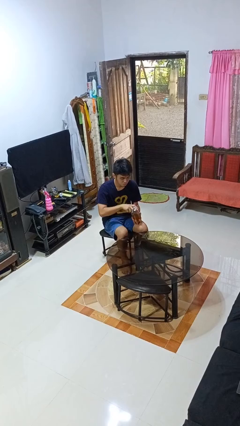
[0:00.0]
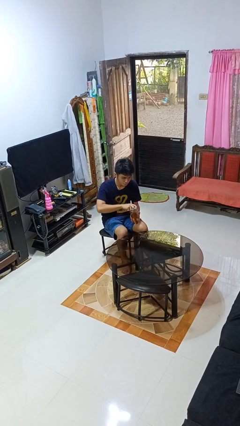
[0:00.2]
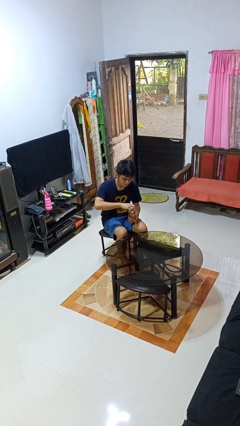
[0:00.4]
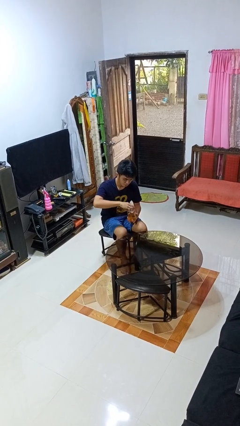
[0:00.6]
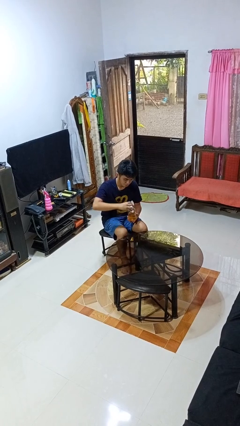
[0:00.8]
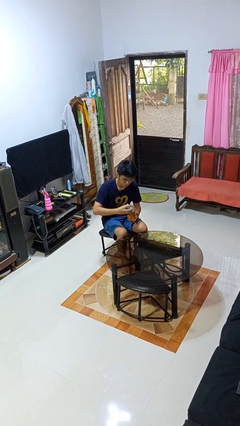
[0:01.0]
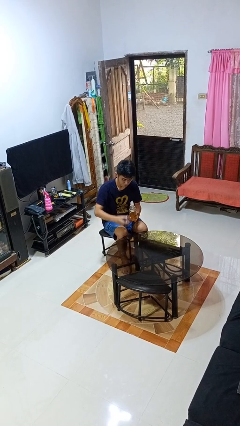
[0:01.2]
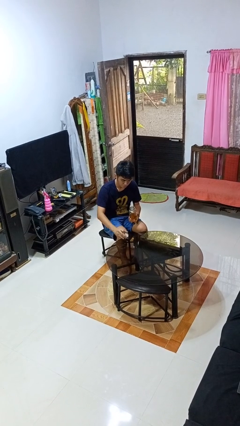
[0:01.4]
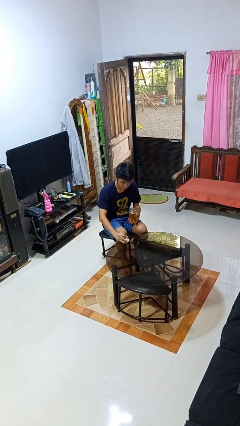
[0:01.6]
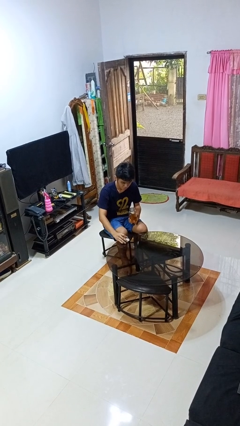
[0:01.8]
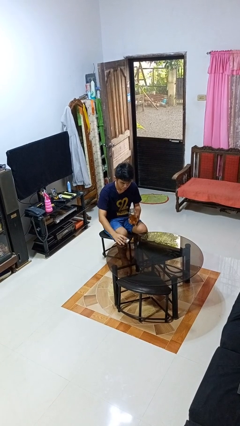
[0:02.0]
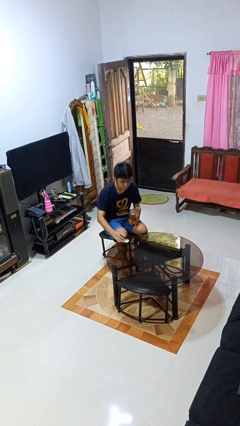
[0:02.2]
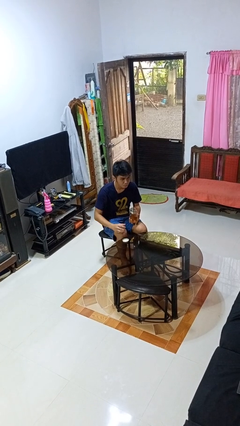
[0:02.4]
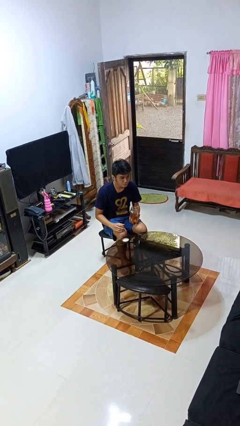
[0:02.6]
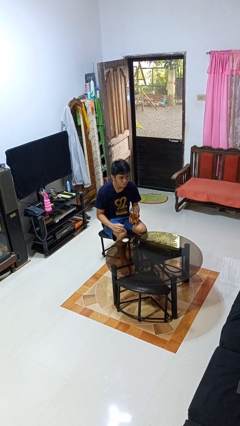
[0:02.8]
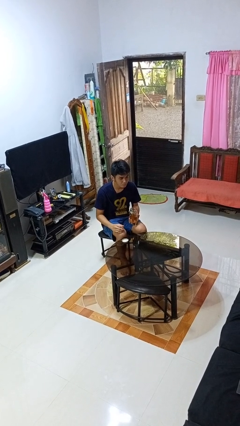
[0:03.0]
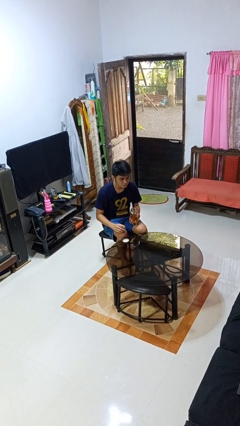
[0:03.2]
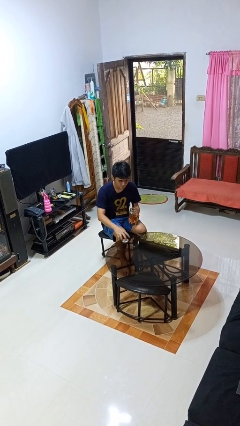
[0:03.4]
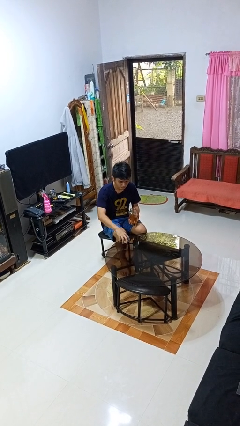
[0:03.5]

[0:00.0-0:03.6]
person opens jar

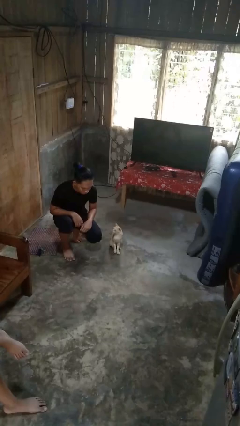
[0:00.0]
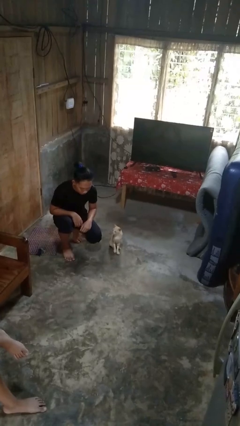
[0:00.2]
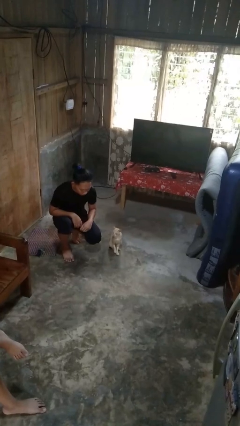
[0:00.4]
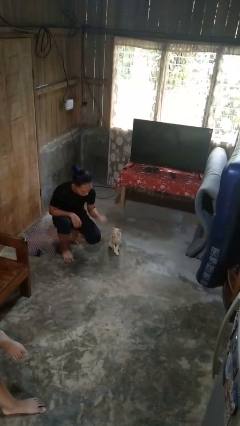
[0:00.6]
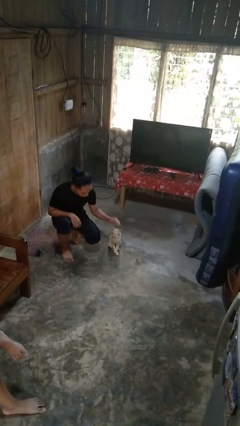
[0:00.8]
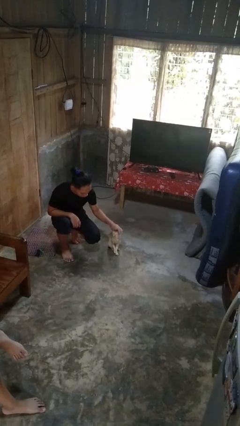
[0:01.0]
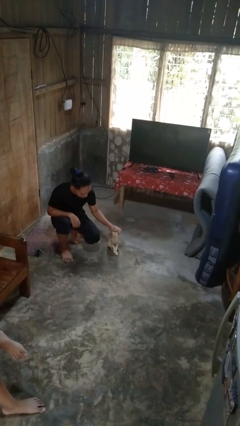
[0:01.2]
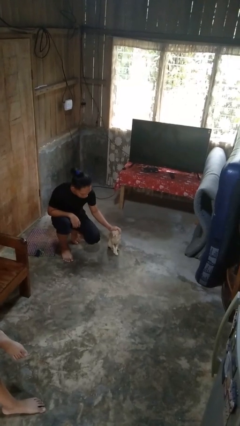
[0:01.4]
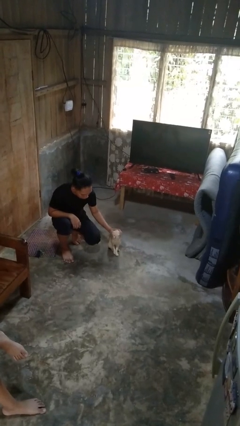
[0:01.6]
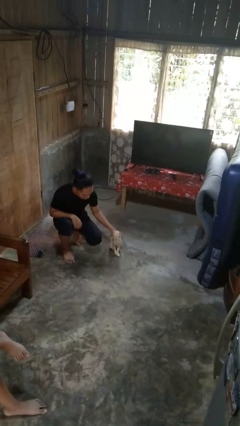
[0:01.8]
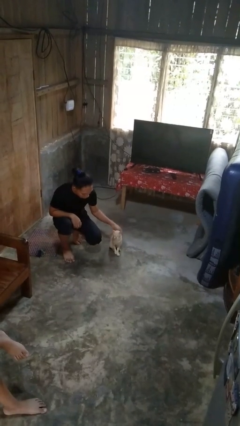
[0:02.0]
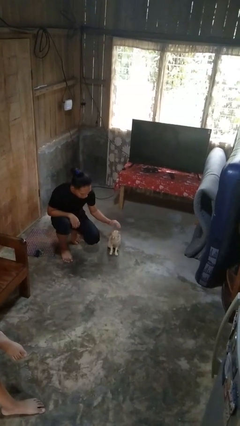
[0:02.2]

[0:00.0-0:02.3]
person pets cat

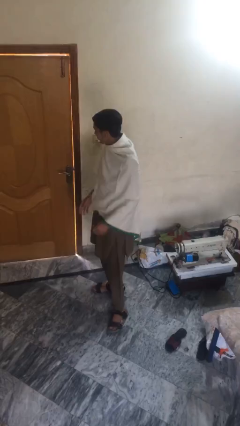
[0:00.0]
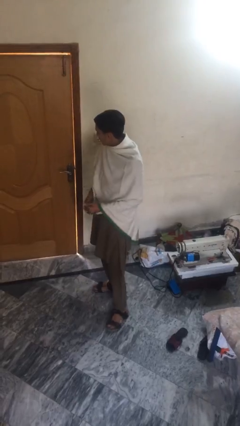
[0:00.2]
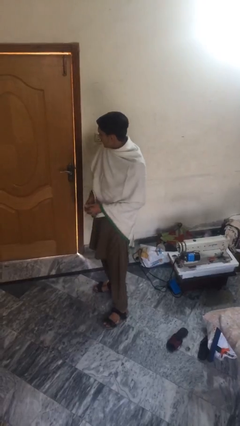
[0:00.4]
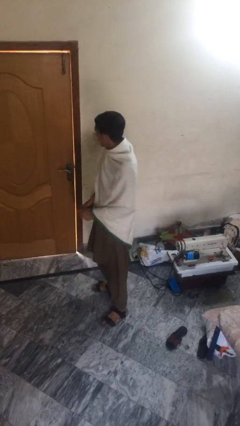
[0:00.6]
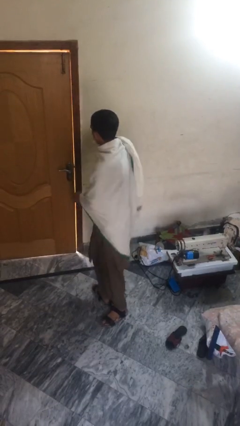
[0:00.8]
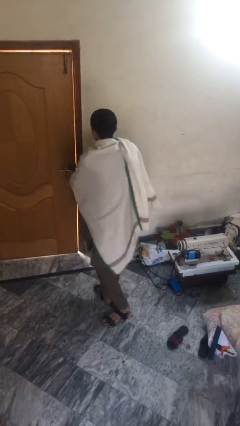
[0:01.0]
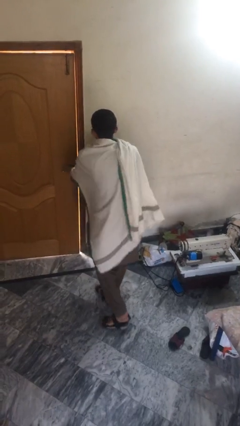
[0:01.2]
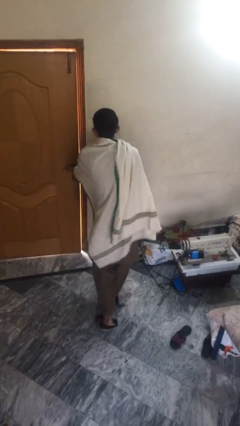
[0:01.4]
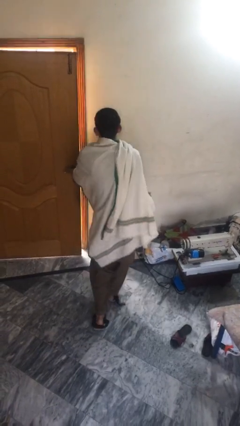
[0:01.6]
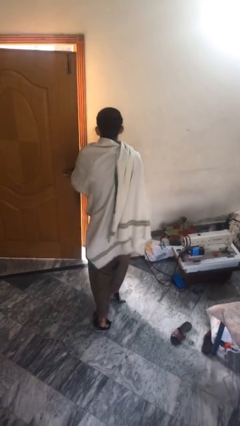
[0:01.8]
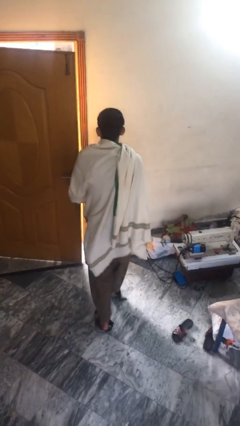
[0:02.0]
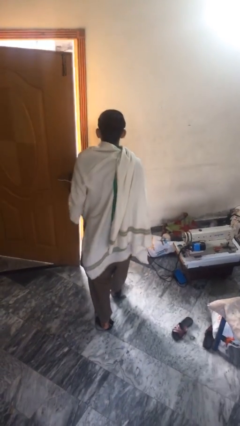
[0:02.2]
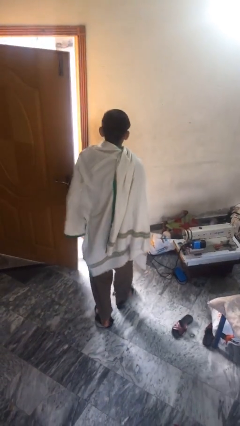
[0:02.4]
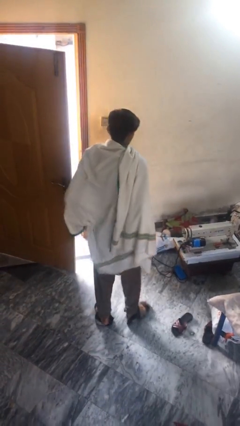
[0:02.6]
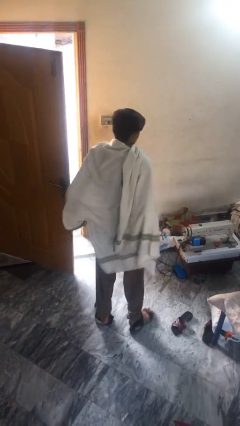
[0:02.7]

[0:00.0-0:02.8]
person opens facility door

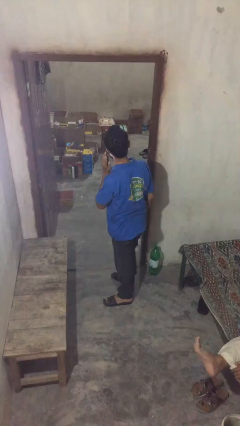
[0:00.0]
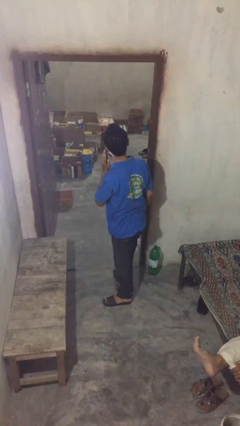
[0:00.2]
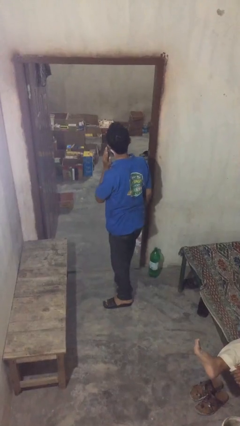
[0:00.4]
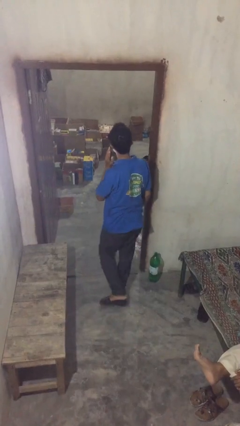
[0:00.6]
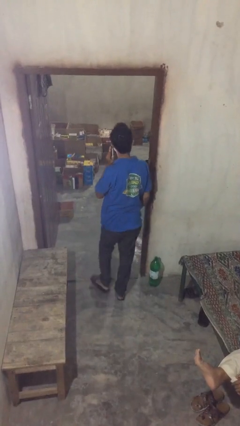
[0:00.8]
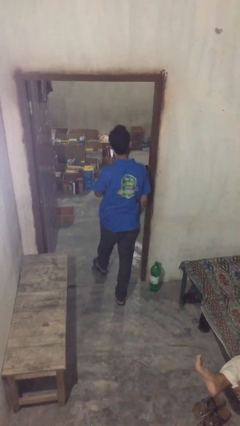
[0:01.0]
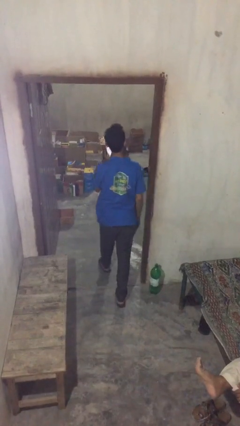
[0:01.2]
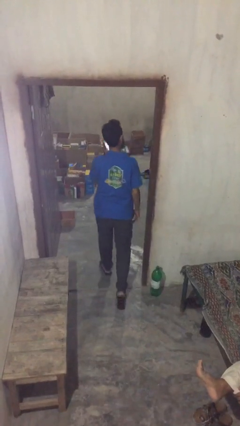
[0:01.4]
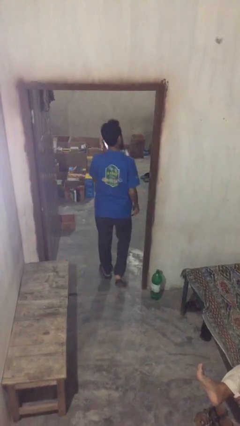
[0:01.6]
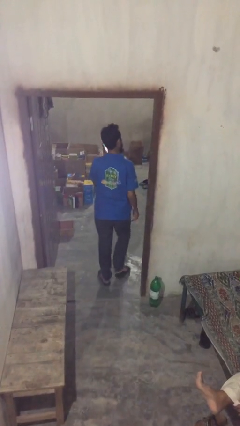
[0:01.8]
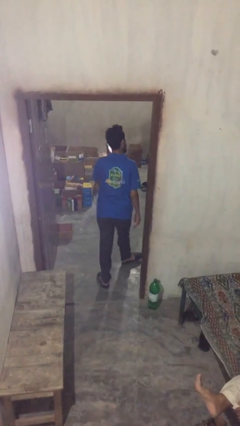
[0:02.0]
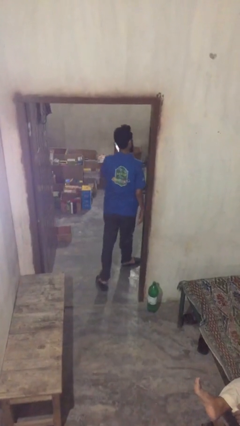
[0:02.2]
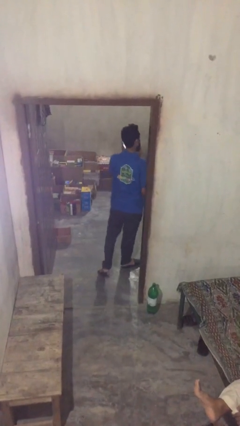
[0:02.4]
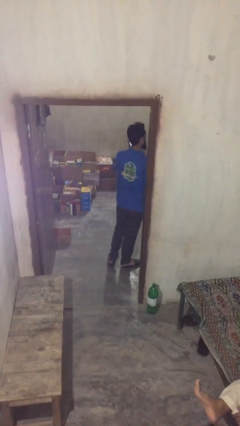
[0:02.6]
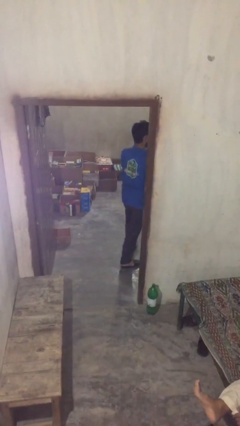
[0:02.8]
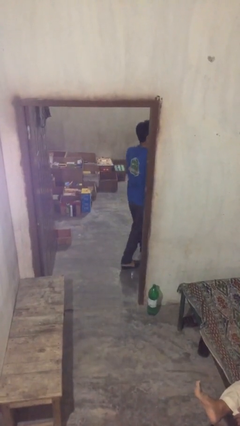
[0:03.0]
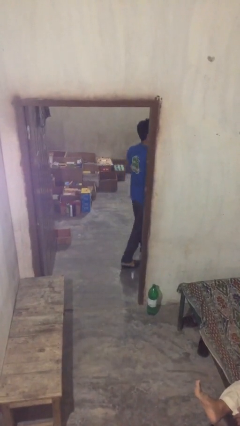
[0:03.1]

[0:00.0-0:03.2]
person exits scene through structure

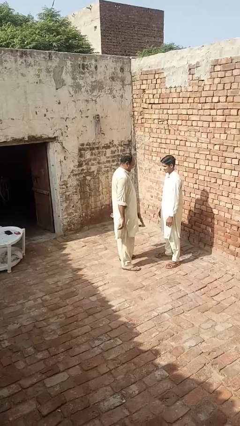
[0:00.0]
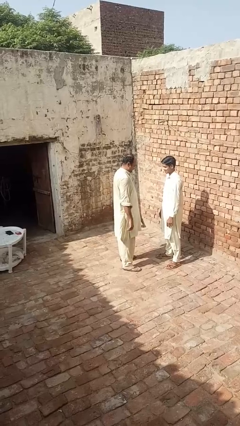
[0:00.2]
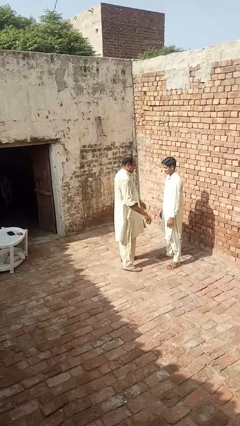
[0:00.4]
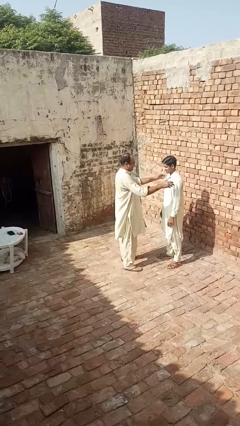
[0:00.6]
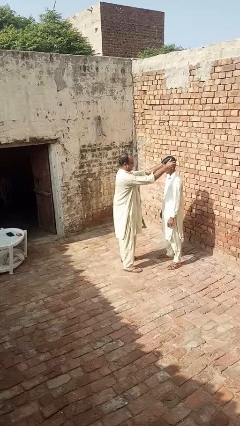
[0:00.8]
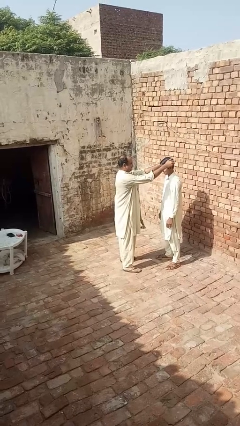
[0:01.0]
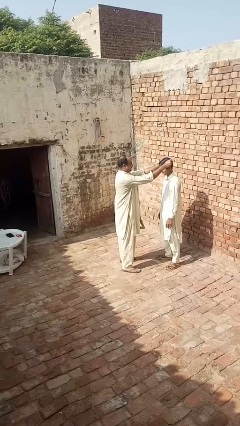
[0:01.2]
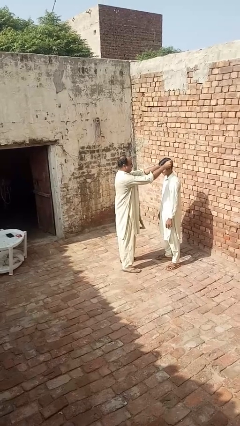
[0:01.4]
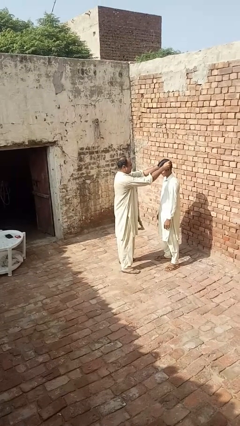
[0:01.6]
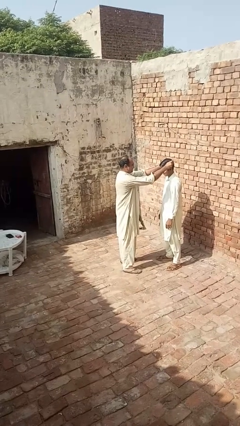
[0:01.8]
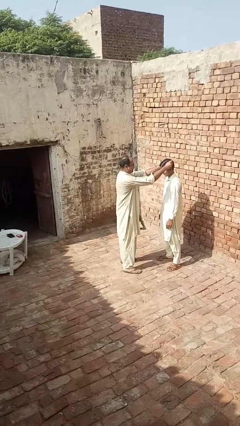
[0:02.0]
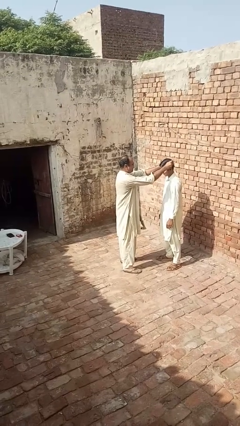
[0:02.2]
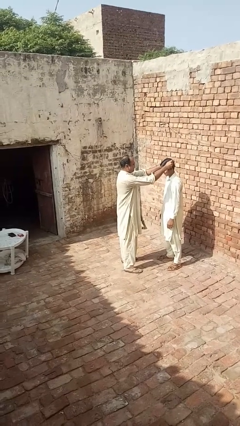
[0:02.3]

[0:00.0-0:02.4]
person grabs person by hair

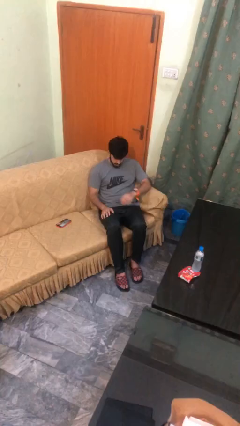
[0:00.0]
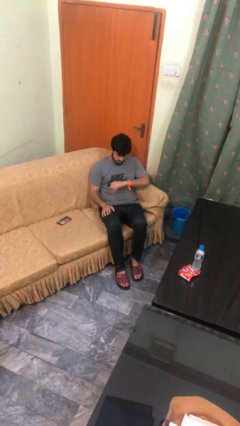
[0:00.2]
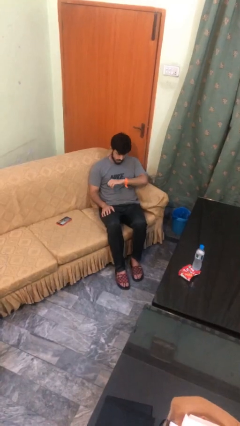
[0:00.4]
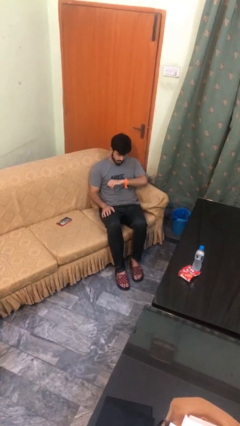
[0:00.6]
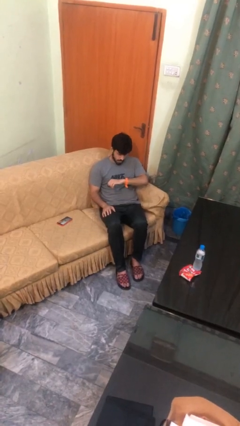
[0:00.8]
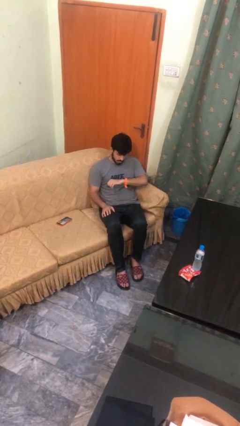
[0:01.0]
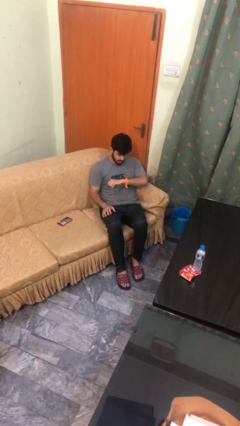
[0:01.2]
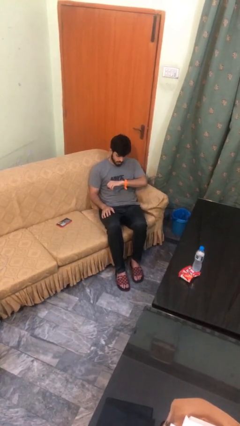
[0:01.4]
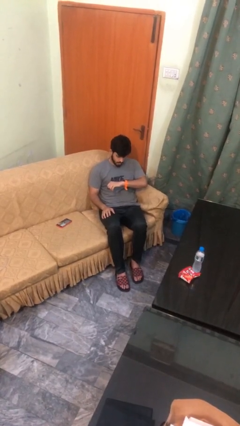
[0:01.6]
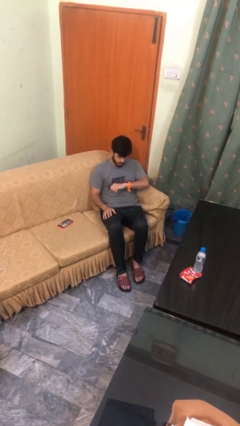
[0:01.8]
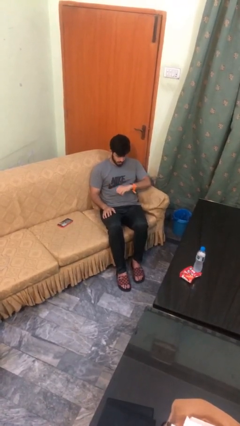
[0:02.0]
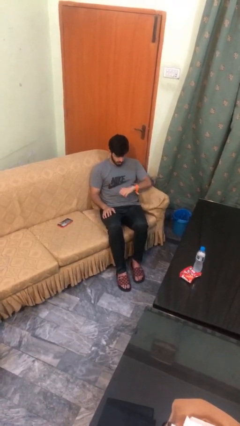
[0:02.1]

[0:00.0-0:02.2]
person looks at wristwatch

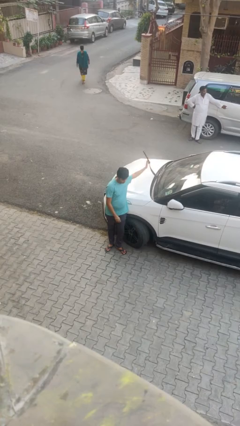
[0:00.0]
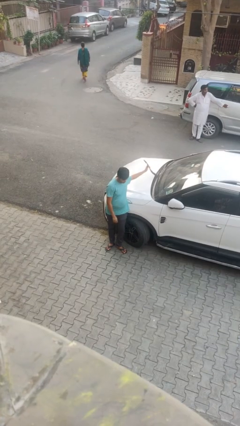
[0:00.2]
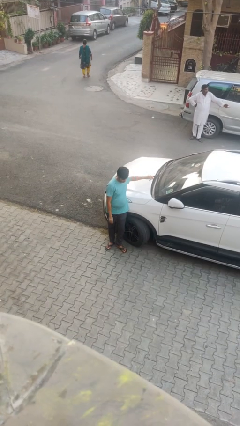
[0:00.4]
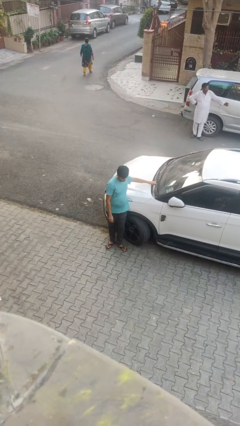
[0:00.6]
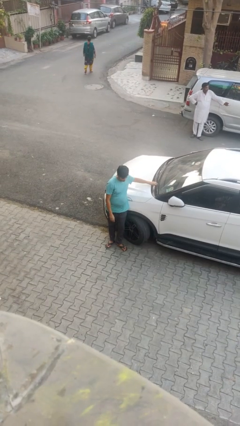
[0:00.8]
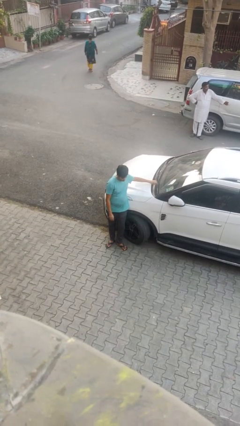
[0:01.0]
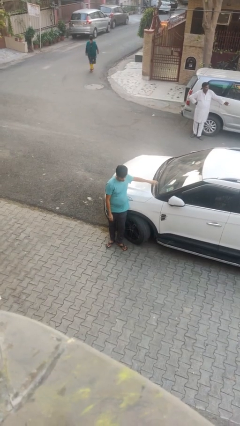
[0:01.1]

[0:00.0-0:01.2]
person flips down car wipers
